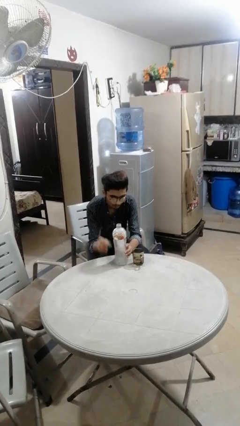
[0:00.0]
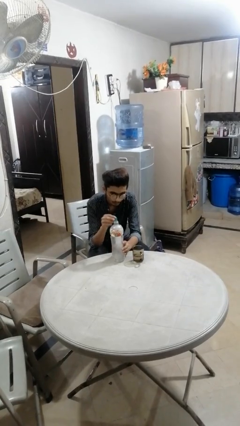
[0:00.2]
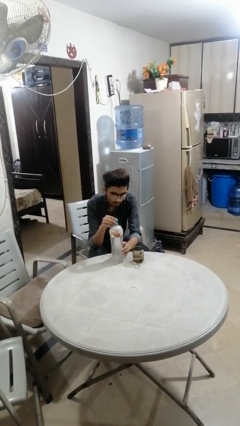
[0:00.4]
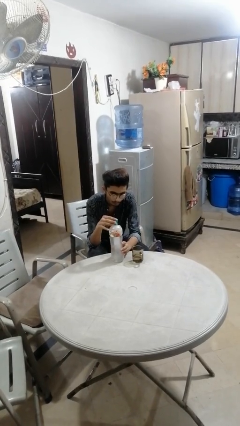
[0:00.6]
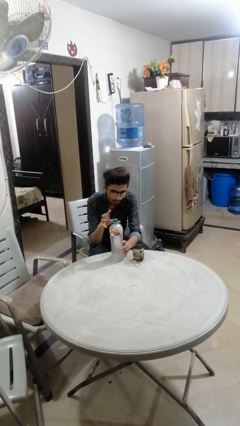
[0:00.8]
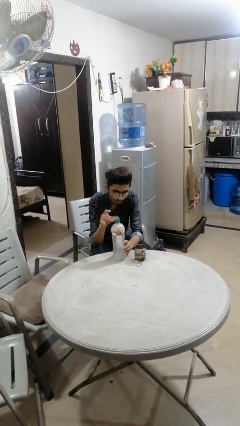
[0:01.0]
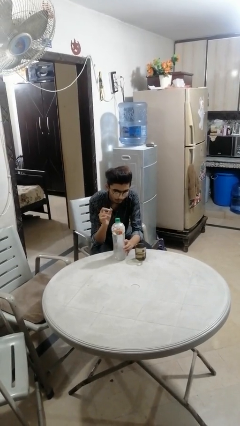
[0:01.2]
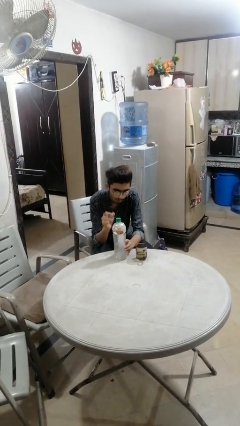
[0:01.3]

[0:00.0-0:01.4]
person screws lid to bottle

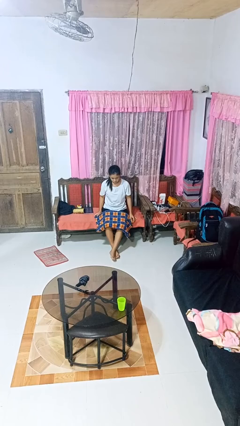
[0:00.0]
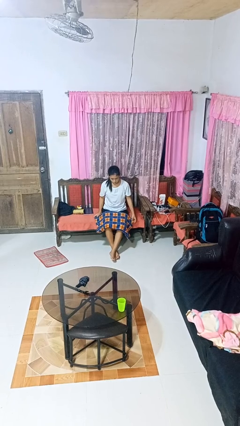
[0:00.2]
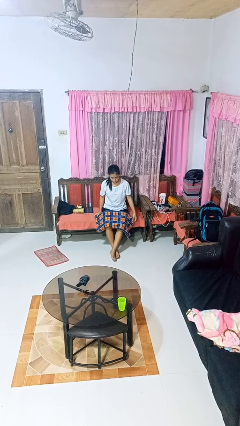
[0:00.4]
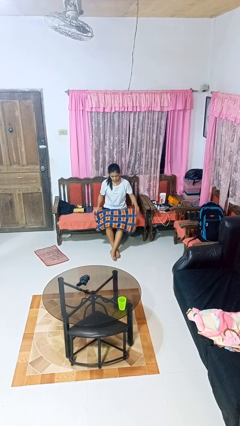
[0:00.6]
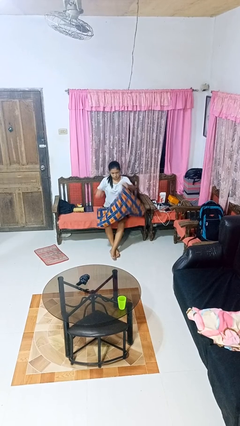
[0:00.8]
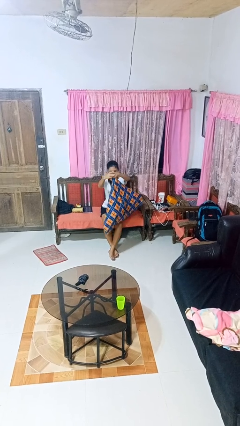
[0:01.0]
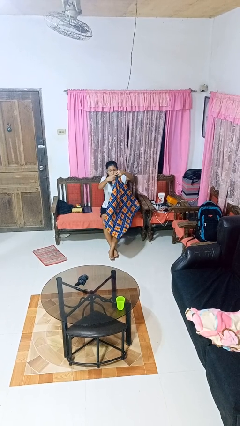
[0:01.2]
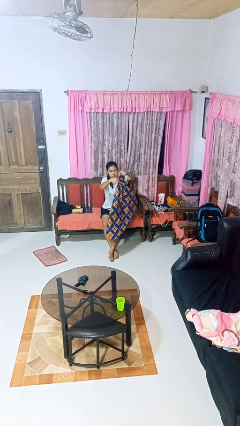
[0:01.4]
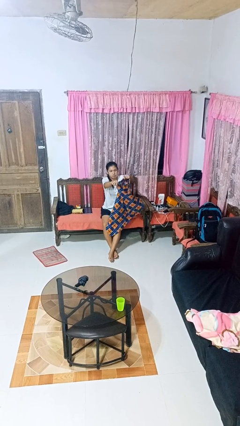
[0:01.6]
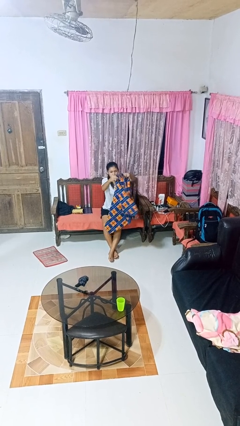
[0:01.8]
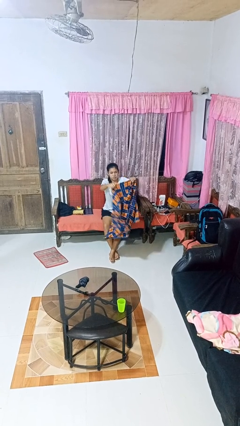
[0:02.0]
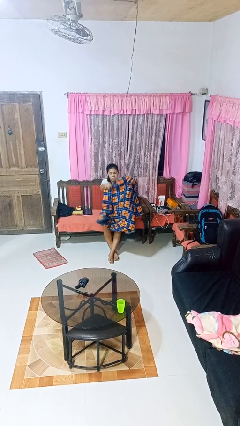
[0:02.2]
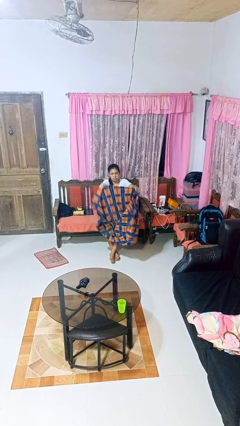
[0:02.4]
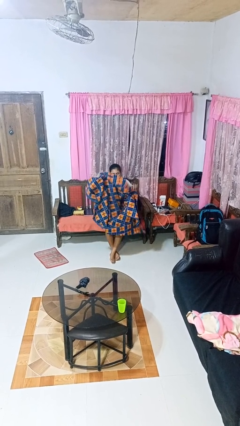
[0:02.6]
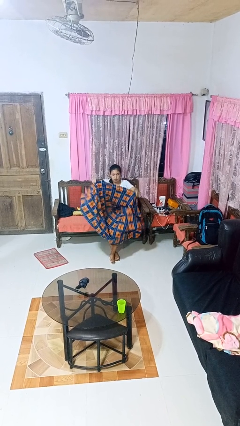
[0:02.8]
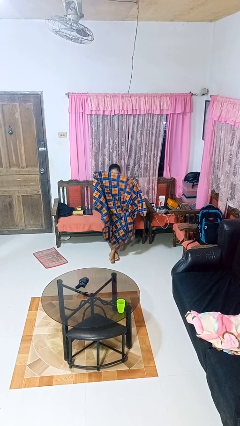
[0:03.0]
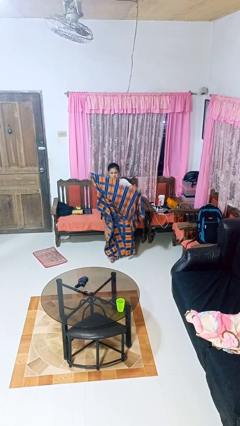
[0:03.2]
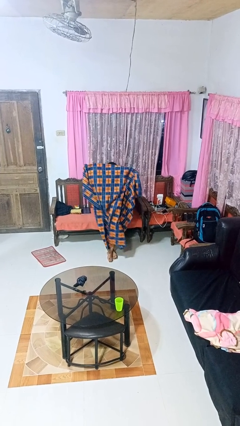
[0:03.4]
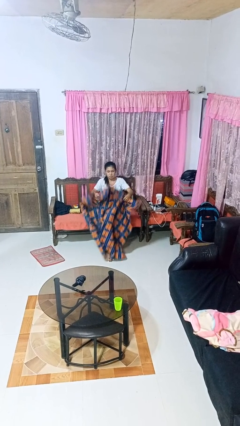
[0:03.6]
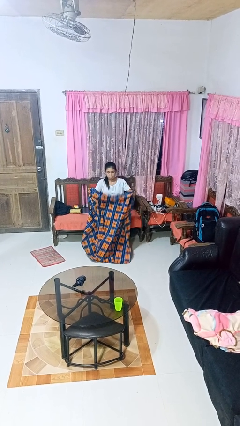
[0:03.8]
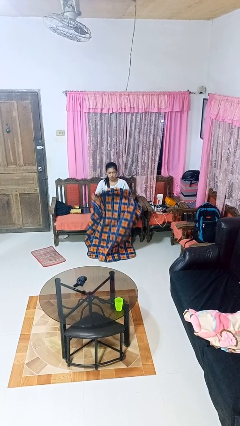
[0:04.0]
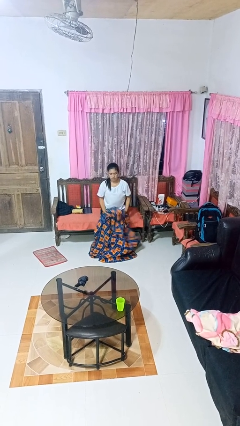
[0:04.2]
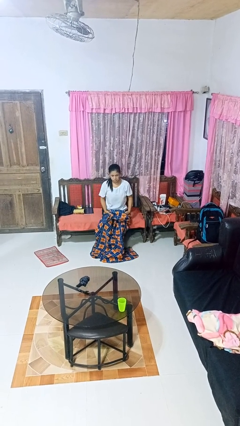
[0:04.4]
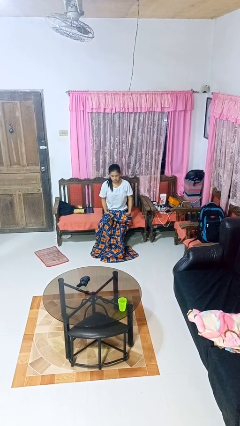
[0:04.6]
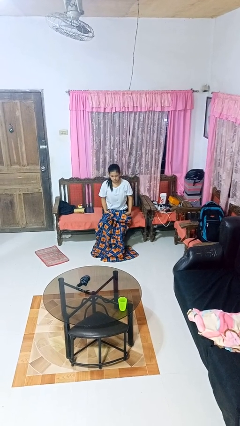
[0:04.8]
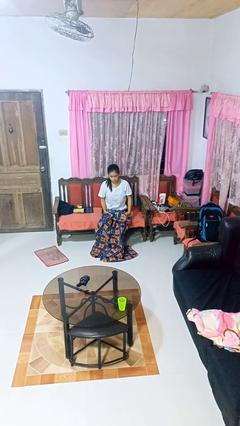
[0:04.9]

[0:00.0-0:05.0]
person unfolds blanket

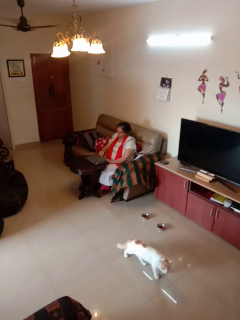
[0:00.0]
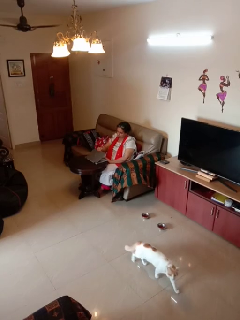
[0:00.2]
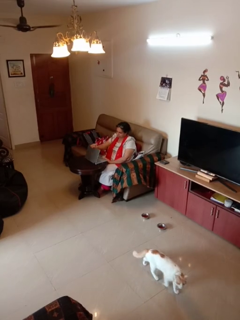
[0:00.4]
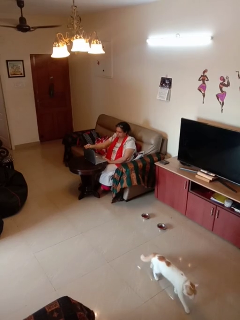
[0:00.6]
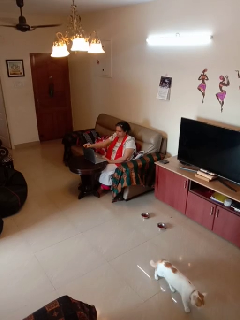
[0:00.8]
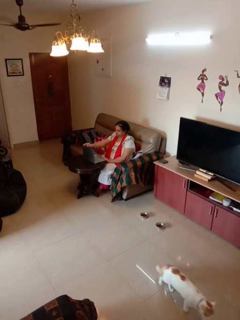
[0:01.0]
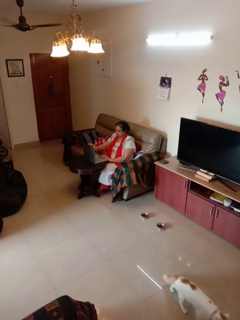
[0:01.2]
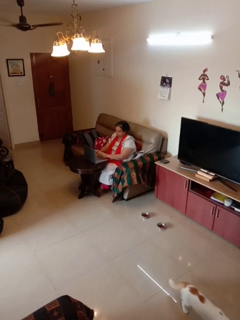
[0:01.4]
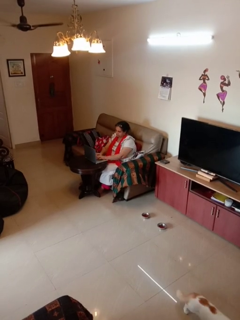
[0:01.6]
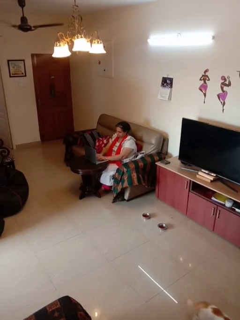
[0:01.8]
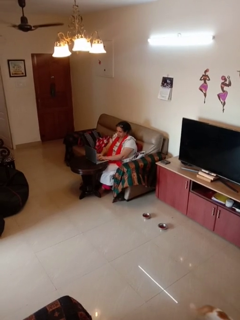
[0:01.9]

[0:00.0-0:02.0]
person opens laptop

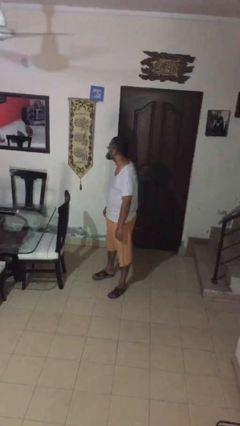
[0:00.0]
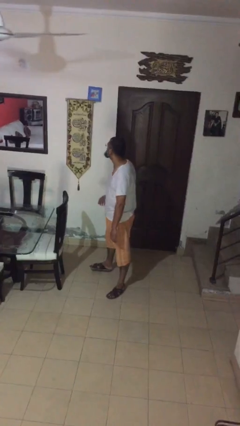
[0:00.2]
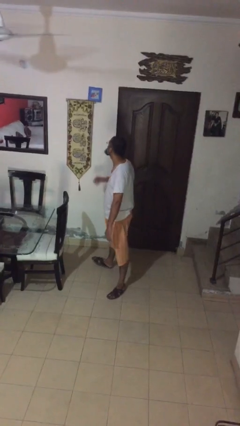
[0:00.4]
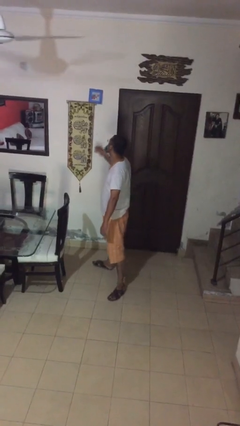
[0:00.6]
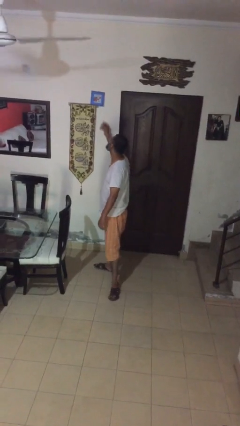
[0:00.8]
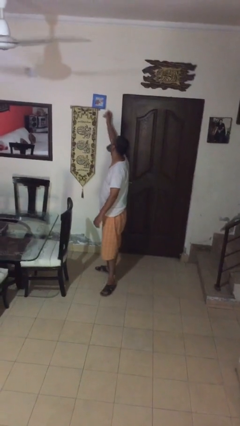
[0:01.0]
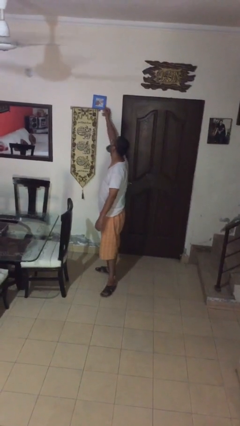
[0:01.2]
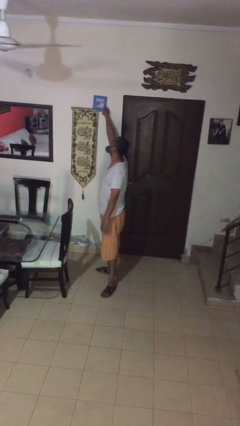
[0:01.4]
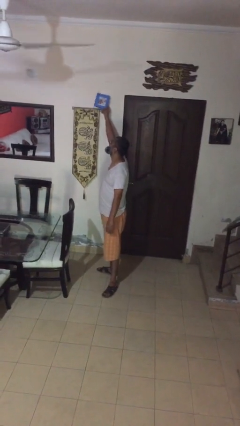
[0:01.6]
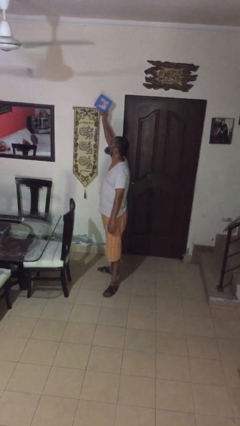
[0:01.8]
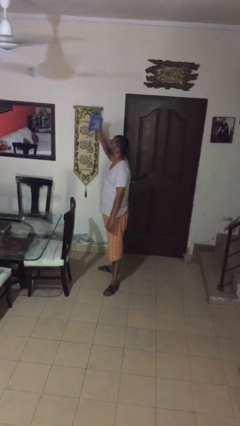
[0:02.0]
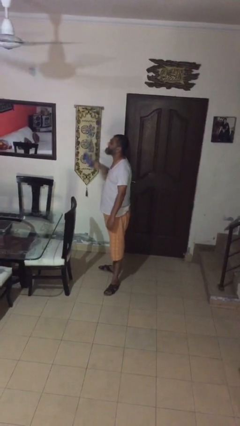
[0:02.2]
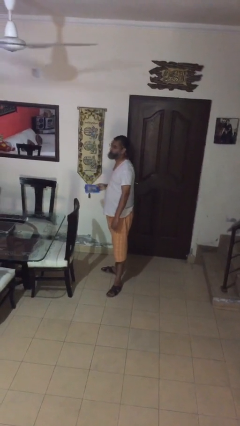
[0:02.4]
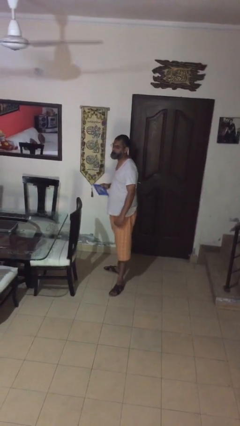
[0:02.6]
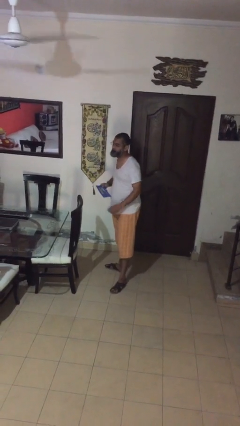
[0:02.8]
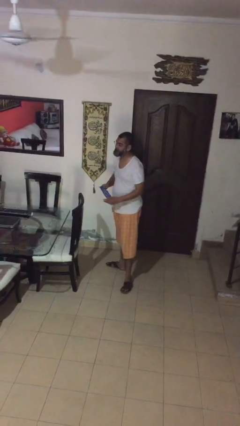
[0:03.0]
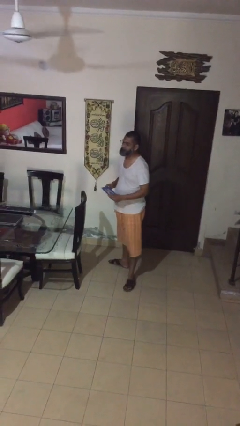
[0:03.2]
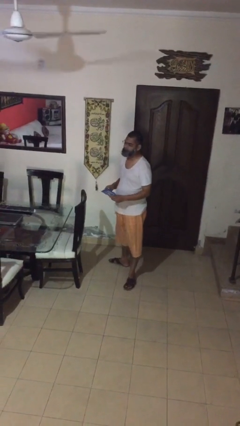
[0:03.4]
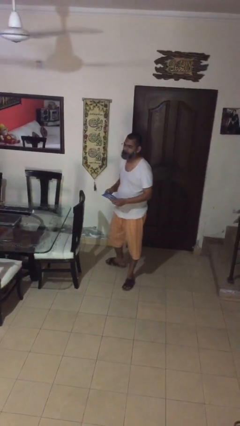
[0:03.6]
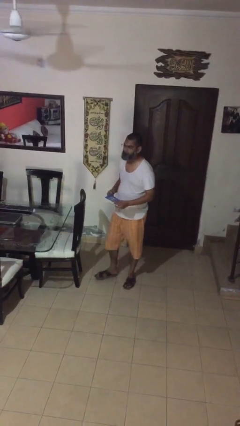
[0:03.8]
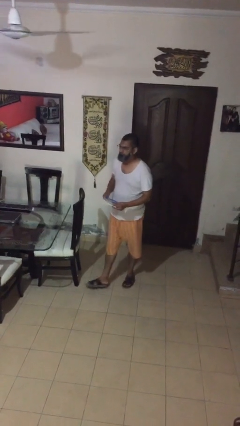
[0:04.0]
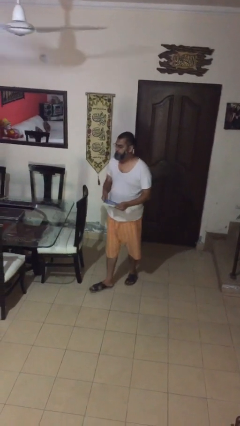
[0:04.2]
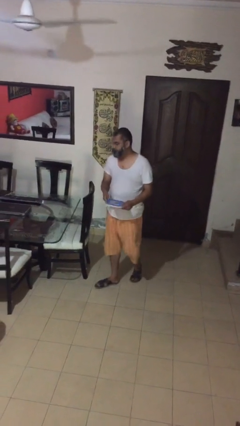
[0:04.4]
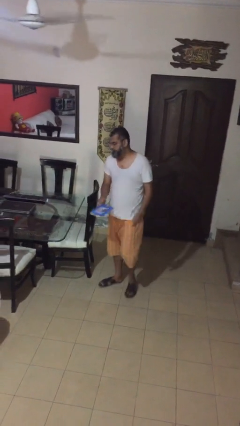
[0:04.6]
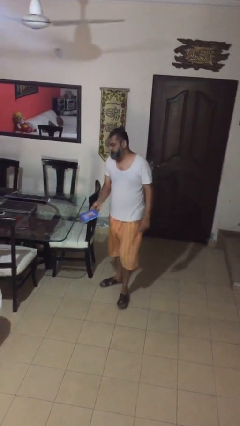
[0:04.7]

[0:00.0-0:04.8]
person picks up object from shelf

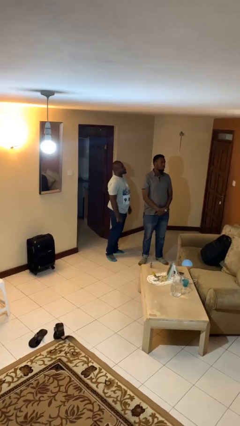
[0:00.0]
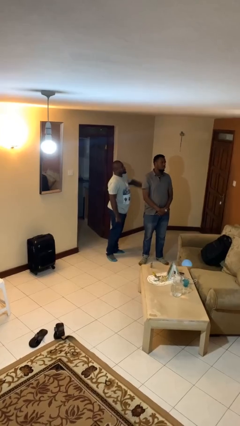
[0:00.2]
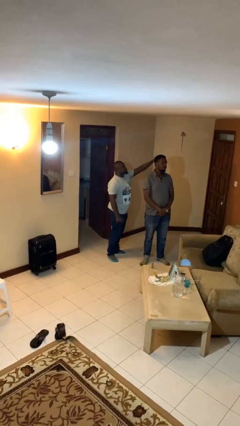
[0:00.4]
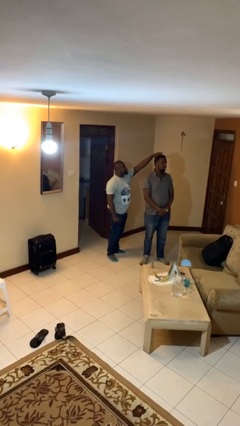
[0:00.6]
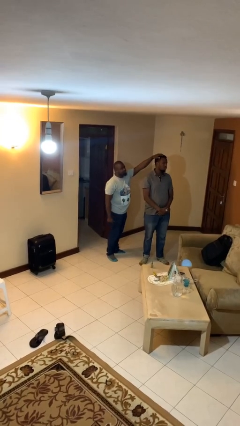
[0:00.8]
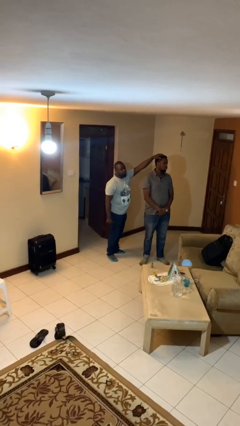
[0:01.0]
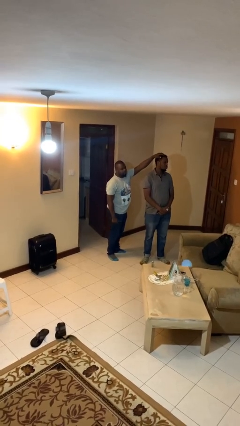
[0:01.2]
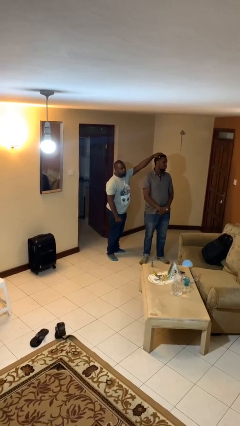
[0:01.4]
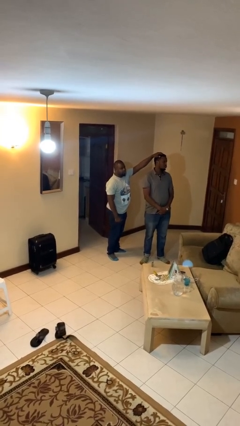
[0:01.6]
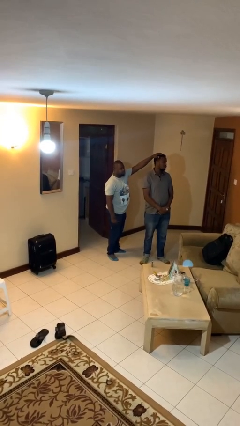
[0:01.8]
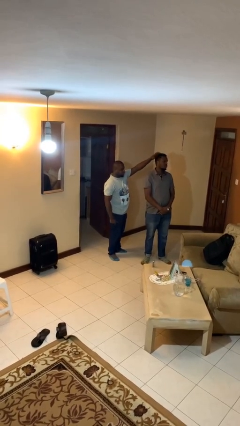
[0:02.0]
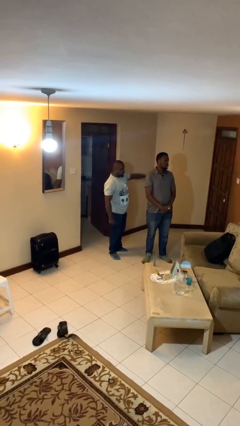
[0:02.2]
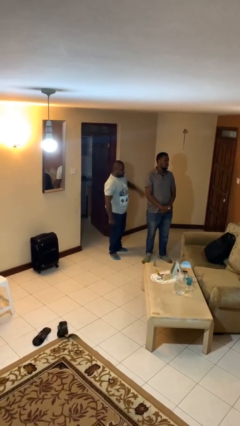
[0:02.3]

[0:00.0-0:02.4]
person grabs person by hair

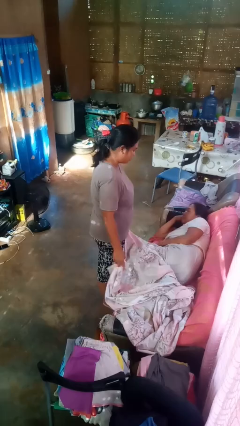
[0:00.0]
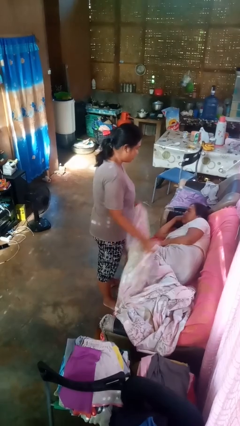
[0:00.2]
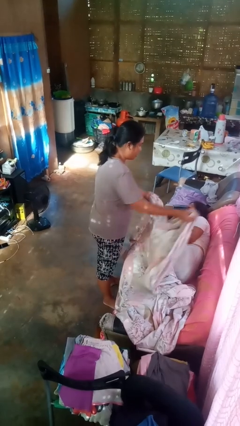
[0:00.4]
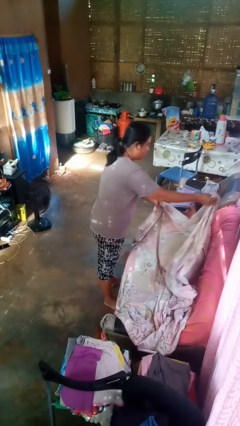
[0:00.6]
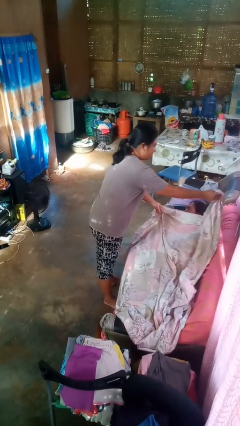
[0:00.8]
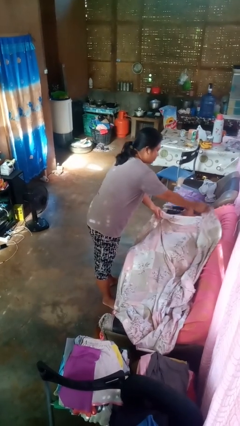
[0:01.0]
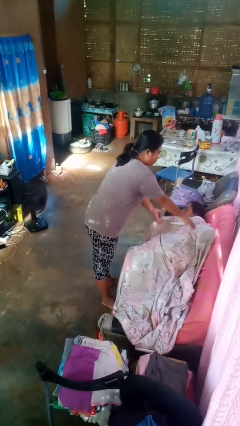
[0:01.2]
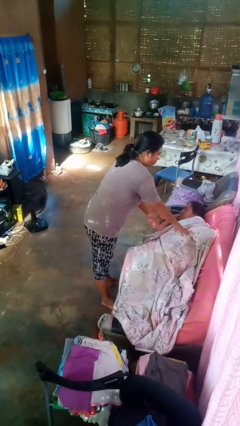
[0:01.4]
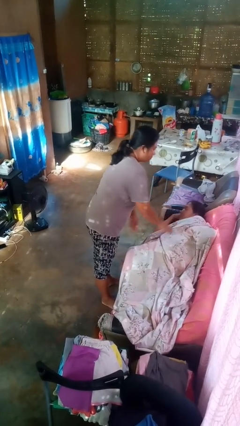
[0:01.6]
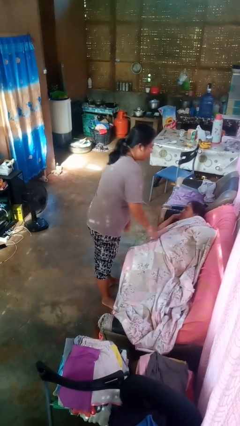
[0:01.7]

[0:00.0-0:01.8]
person covers friend with blanket

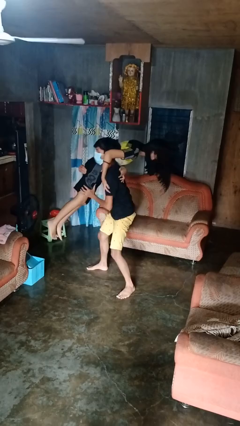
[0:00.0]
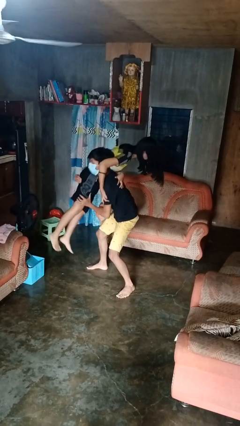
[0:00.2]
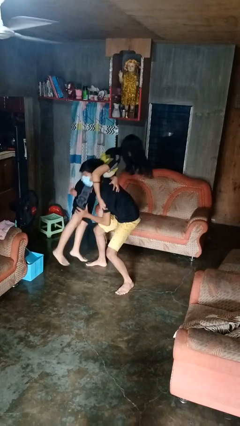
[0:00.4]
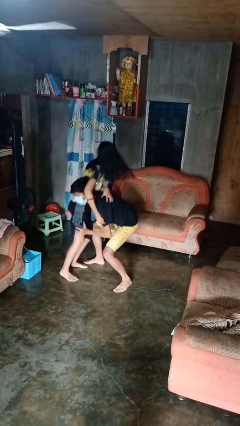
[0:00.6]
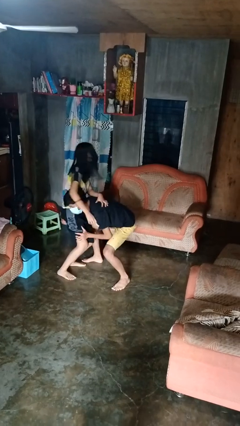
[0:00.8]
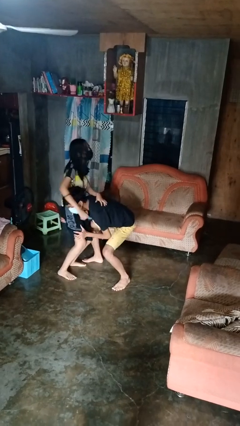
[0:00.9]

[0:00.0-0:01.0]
person puts down person
